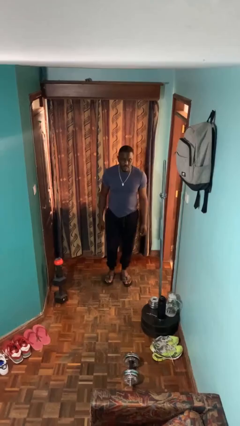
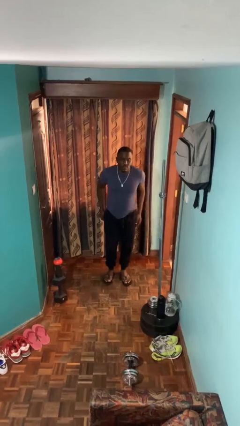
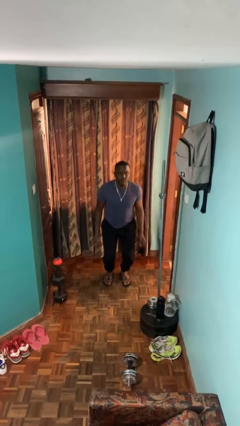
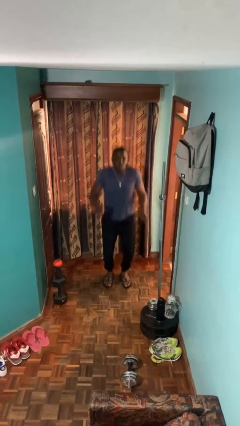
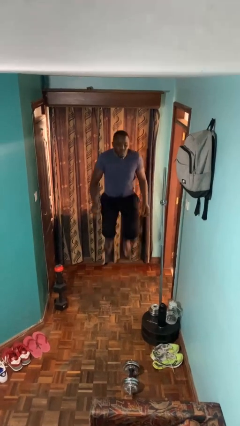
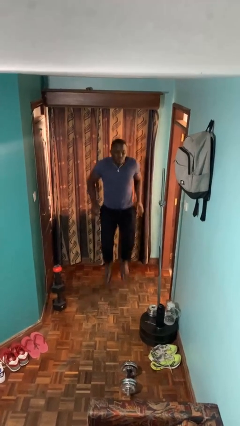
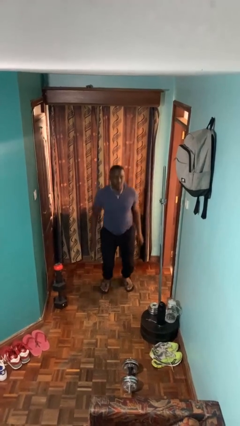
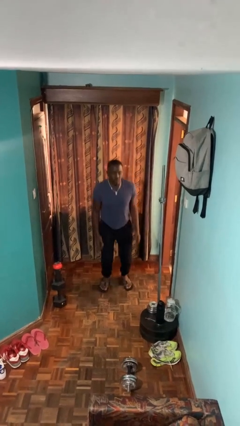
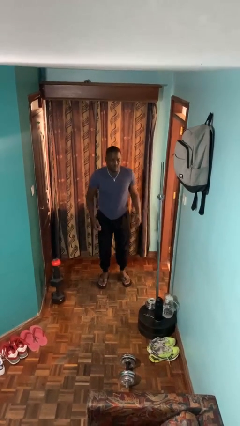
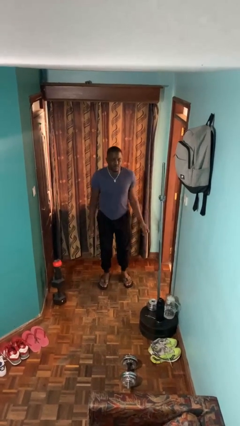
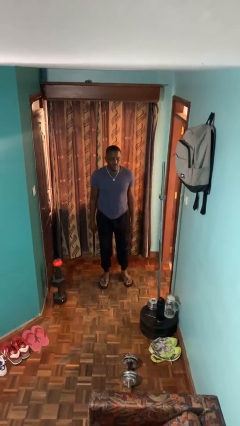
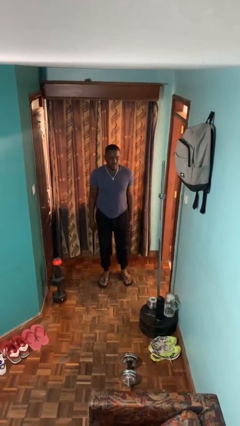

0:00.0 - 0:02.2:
person jumps

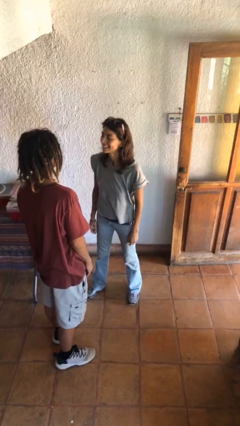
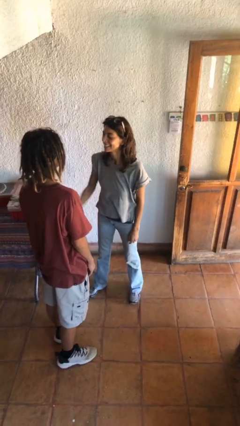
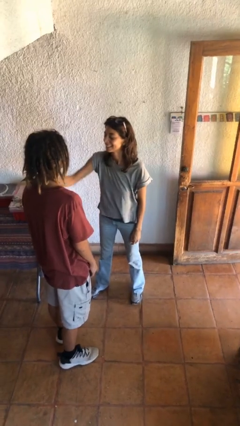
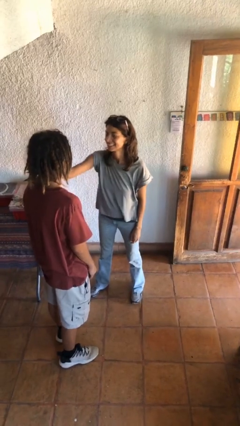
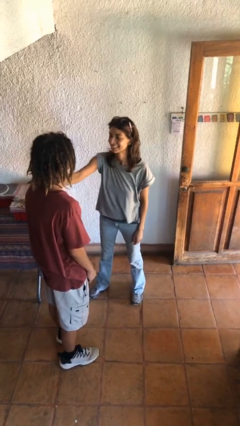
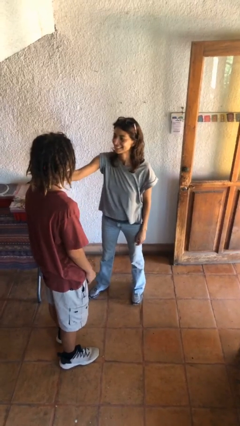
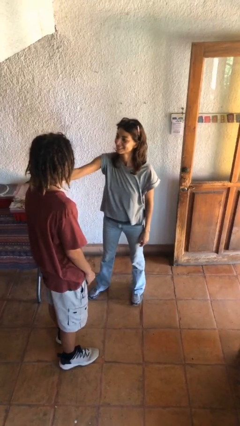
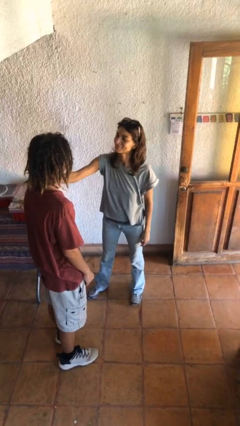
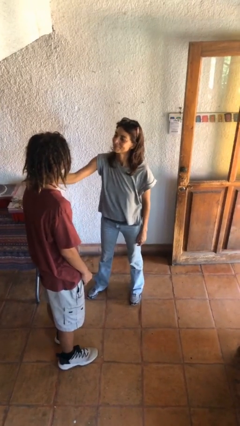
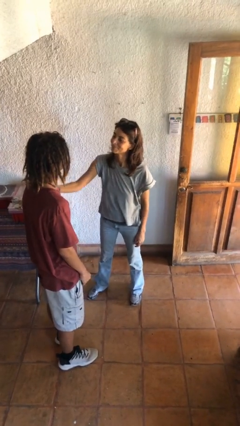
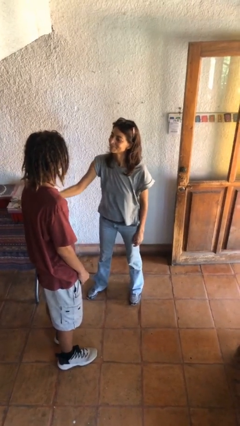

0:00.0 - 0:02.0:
person pounds shoulders of person

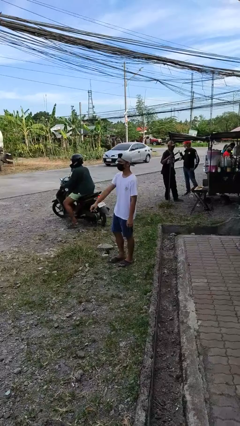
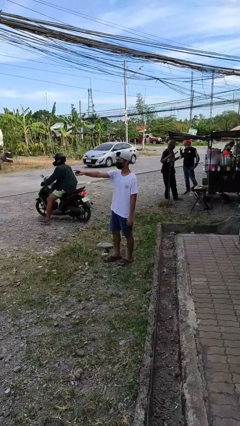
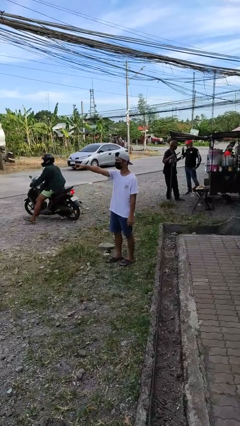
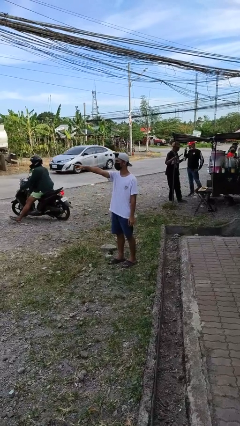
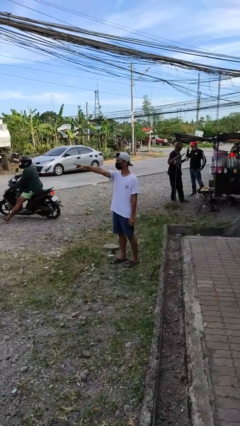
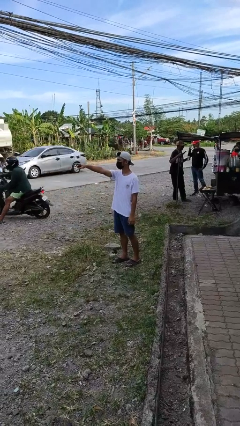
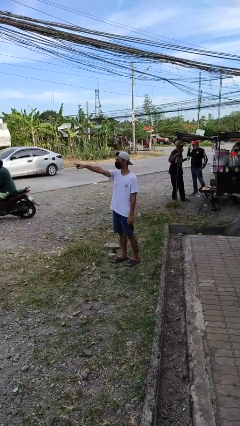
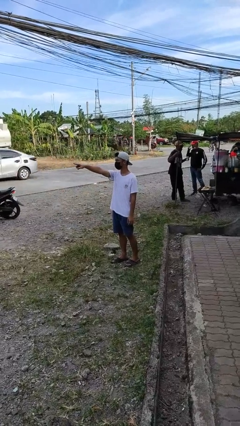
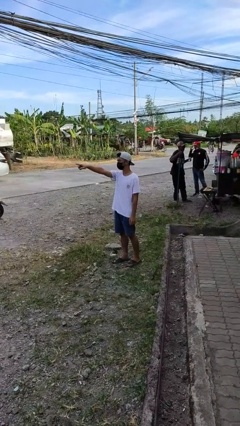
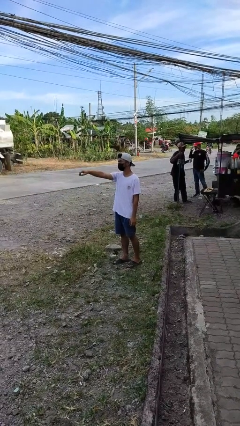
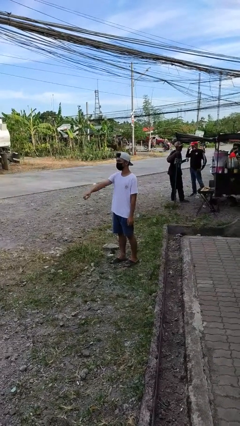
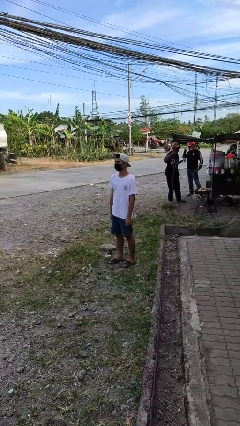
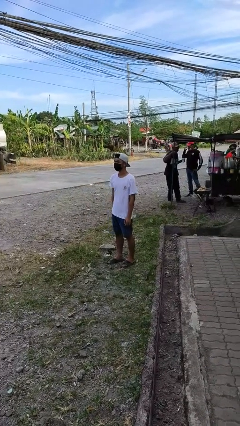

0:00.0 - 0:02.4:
person points at person

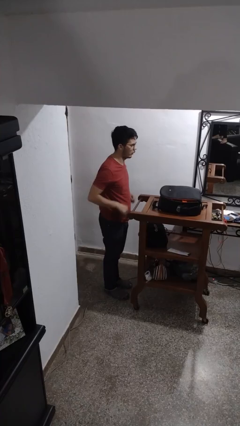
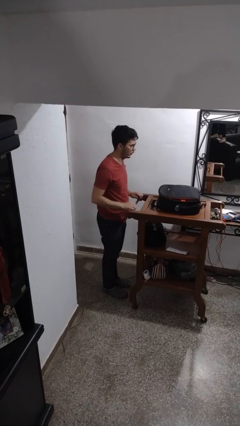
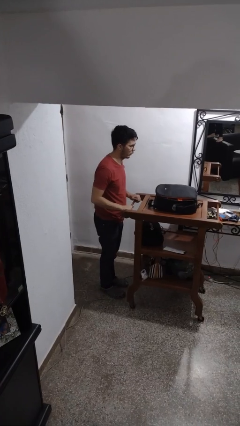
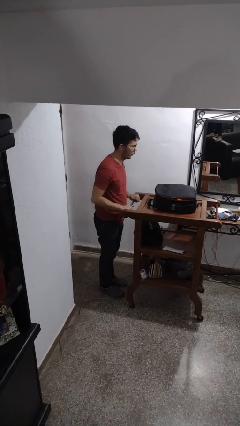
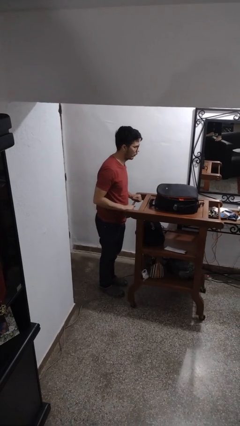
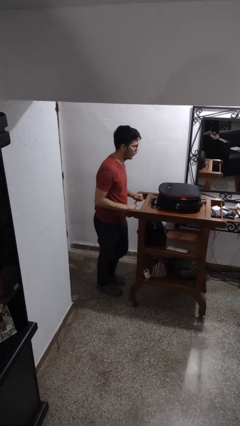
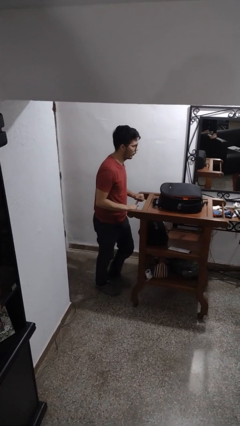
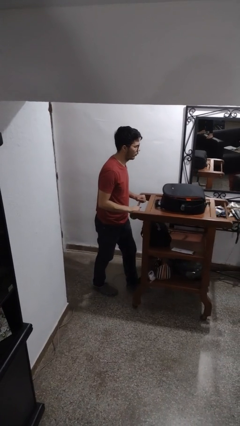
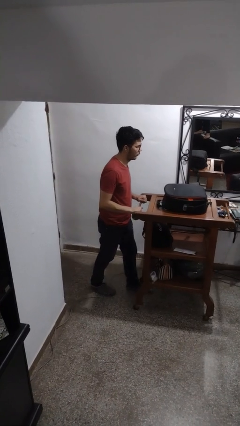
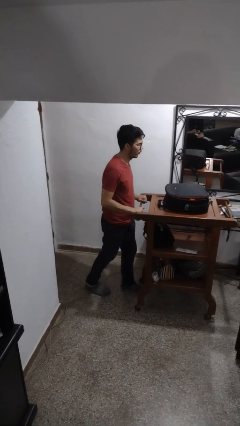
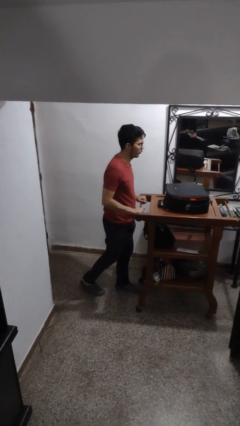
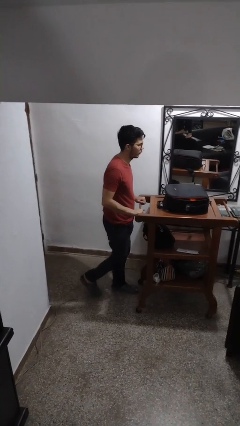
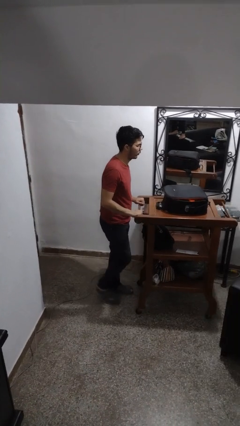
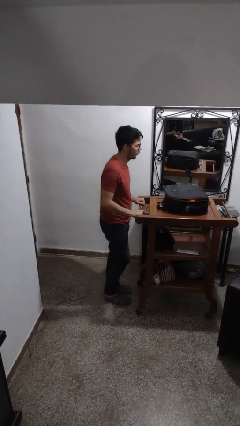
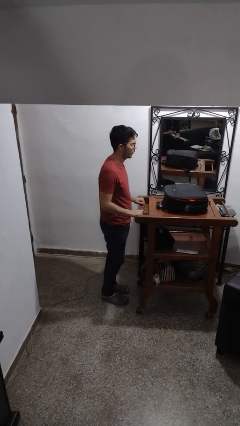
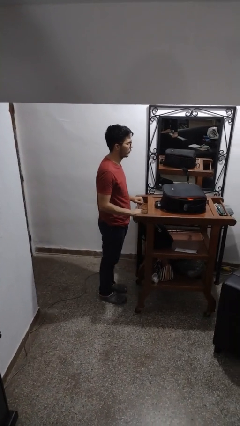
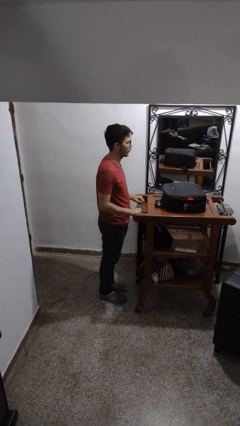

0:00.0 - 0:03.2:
person pushes wheeled cart

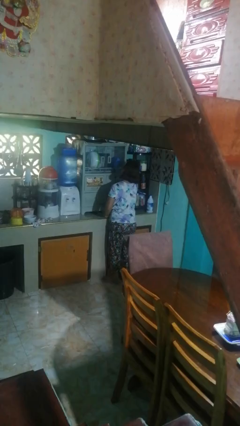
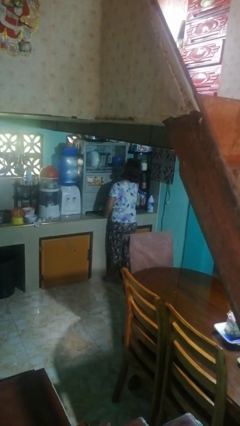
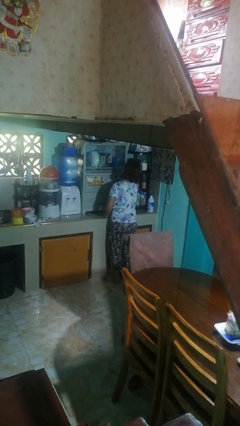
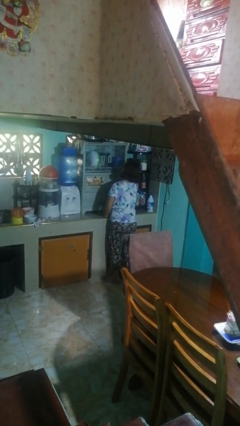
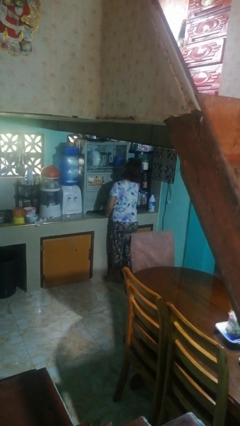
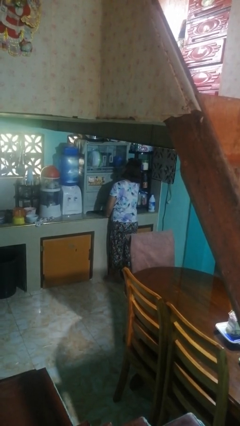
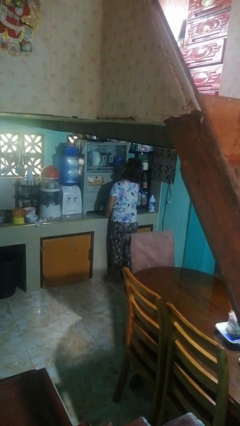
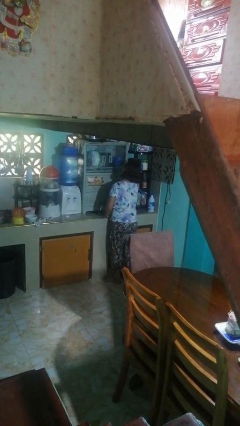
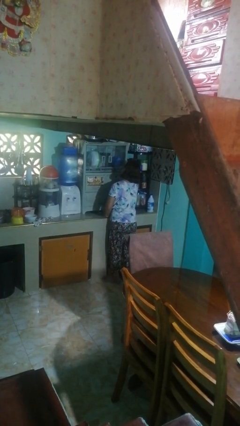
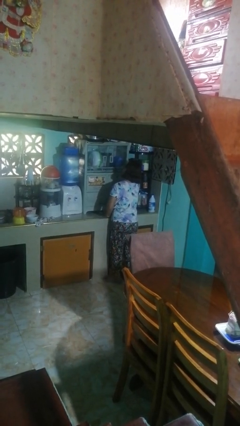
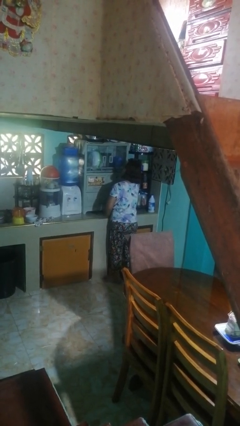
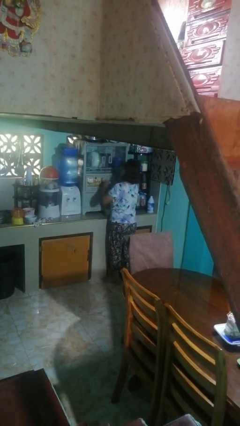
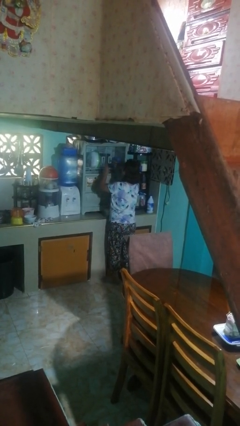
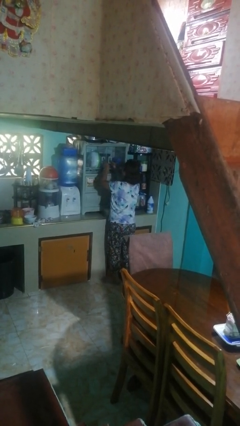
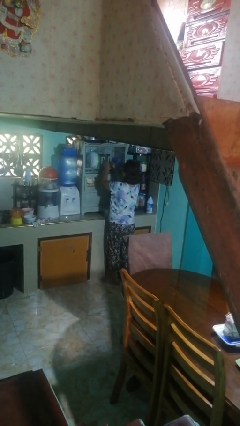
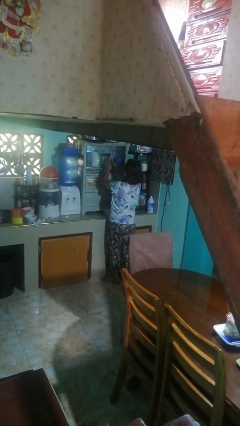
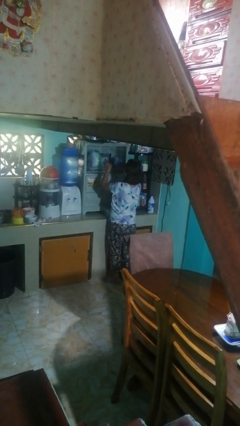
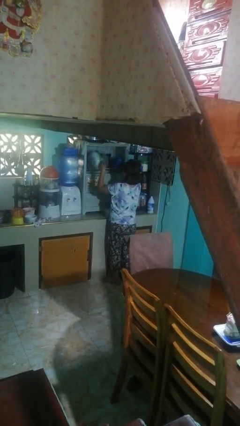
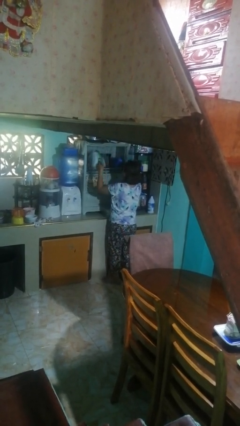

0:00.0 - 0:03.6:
person opens curtains

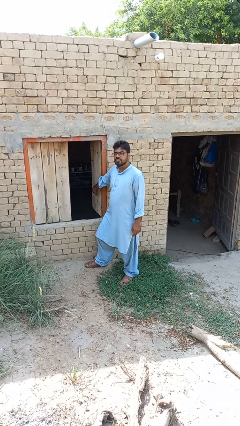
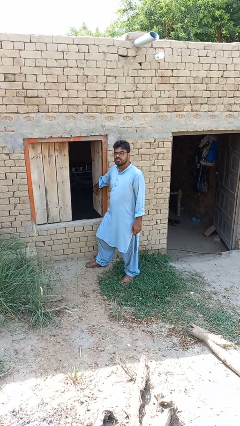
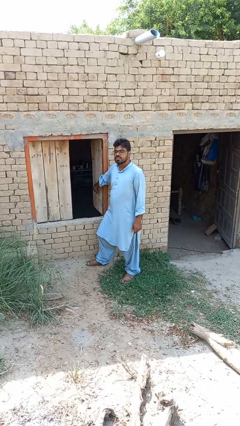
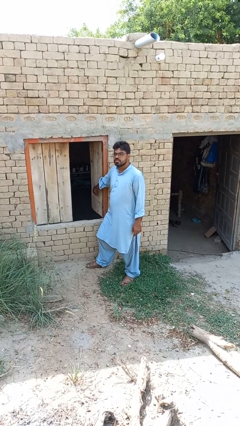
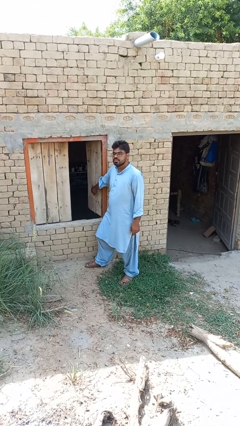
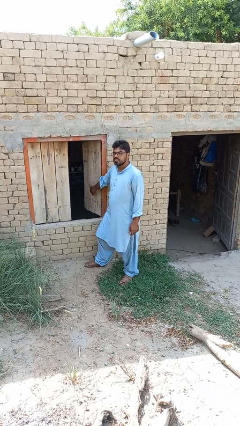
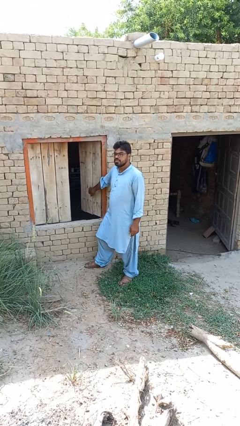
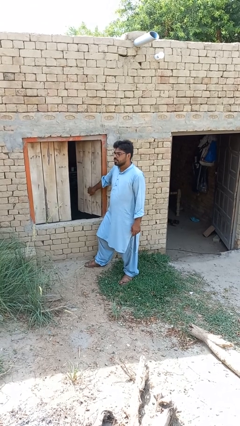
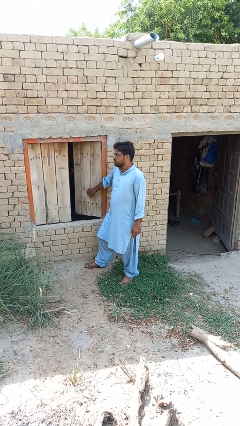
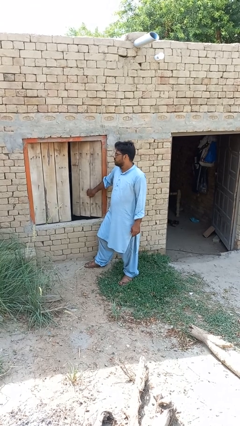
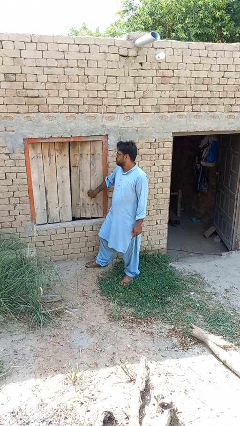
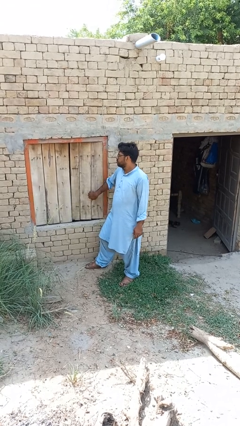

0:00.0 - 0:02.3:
person closes home window

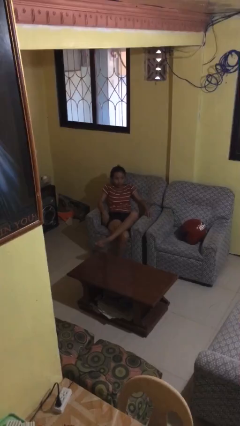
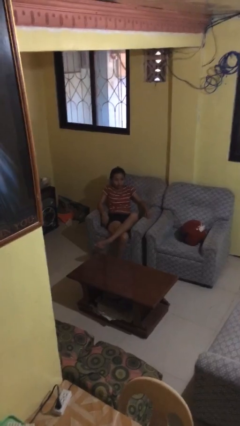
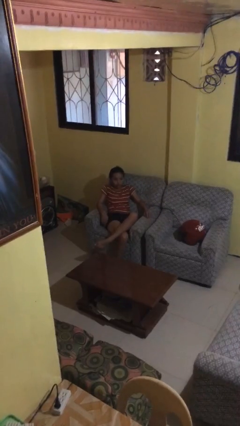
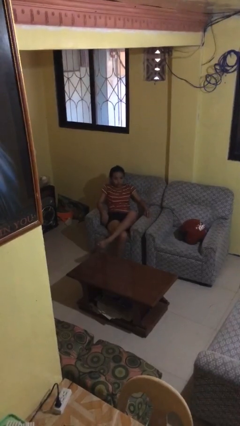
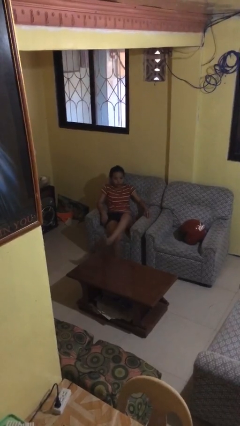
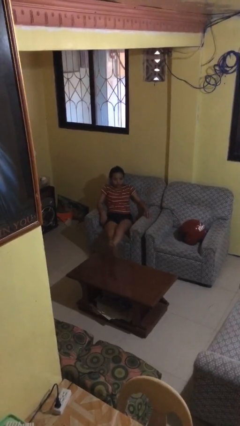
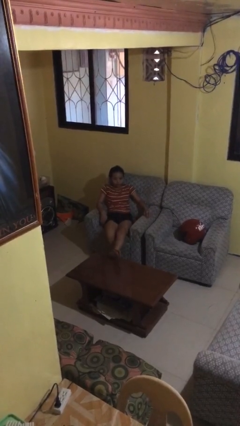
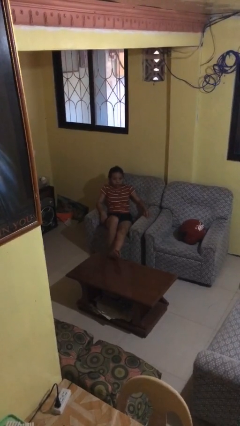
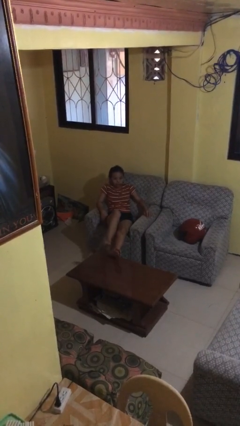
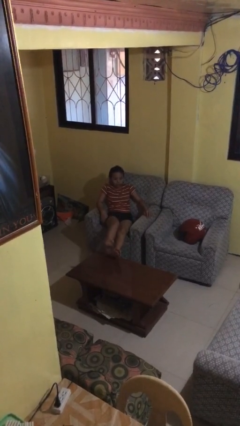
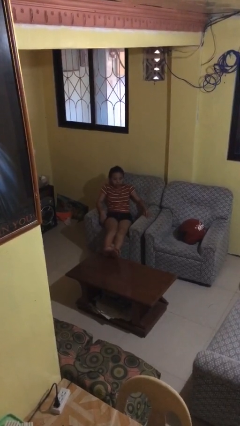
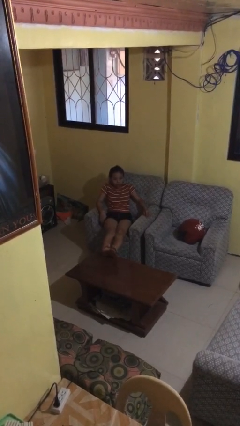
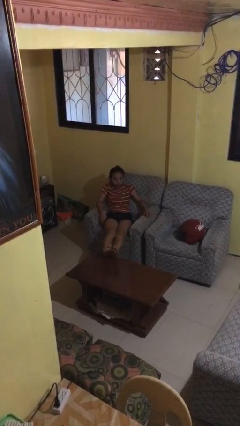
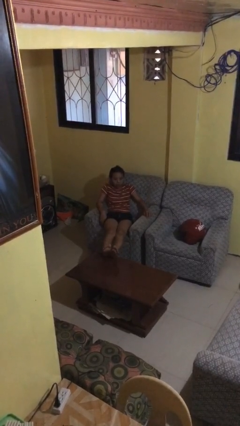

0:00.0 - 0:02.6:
person puts feet up
